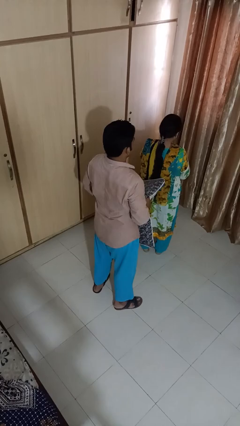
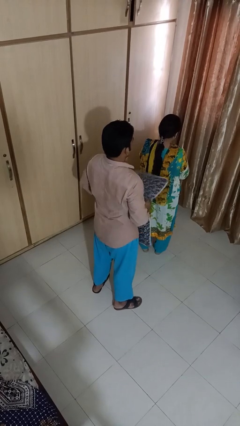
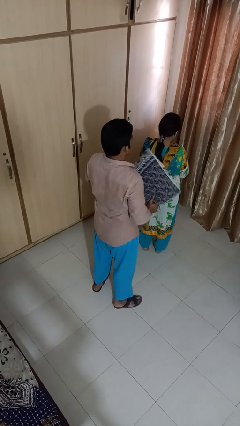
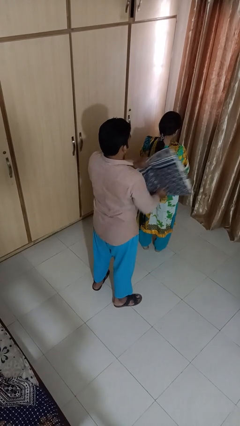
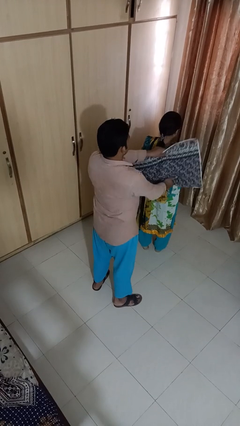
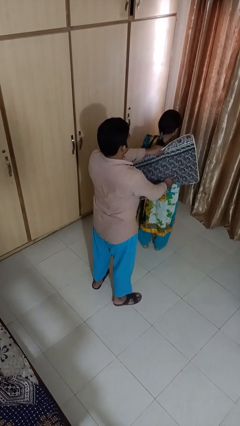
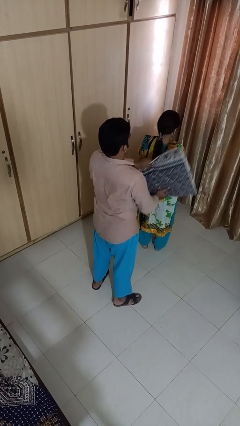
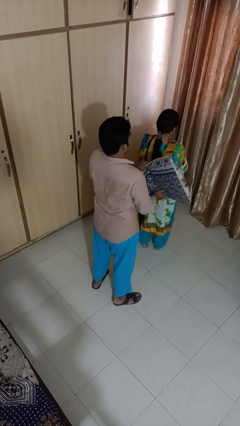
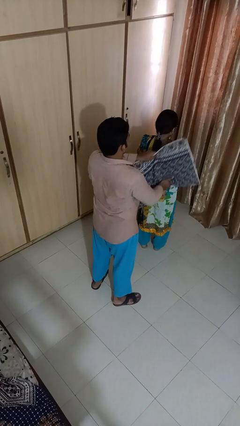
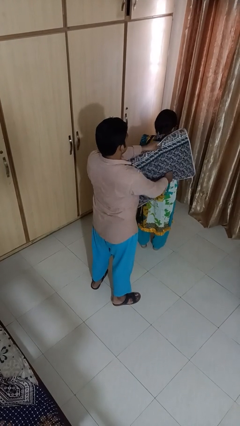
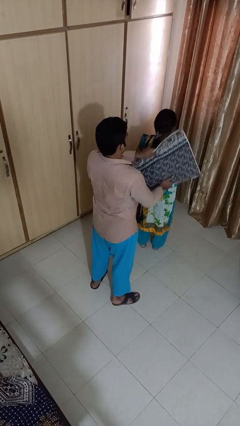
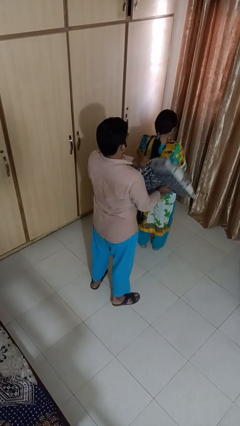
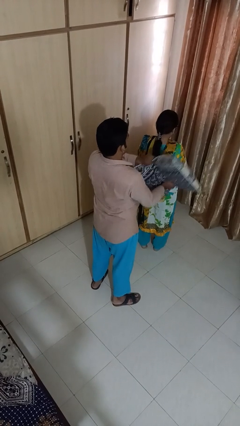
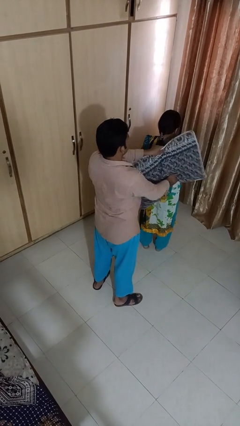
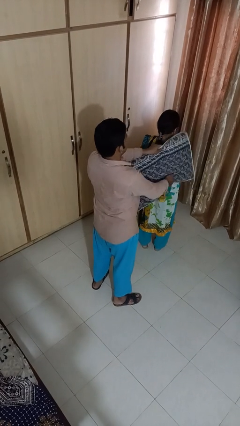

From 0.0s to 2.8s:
person hits person with pillow

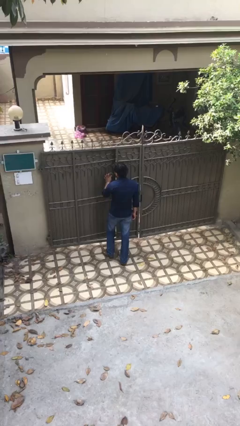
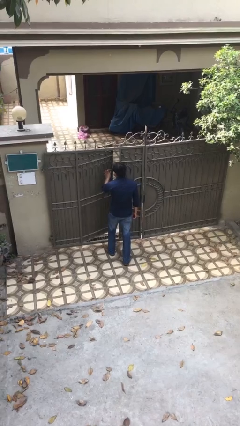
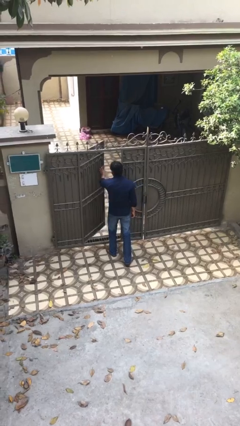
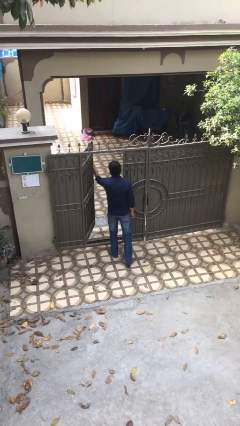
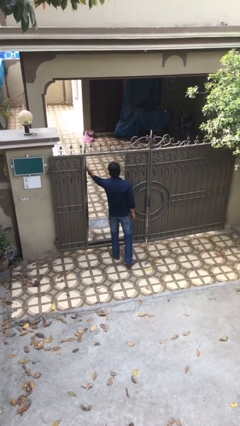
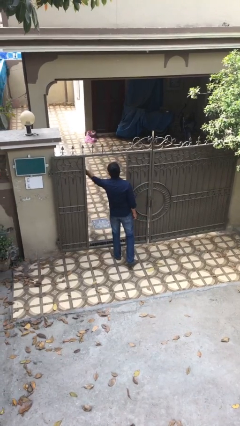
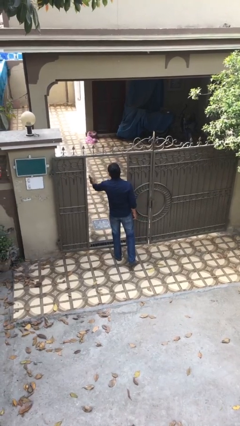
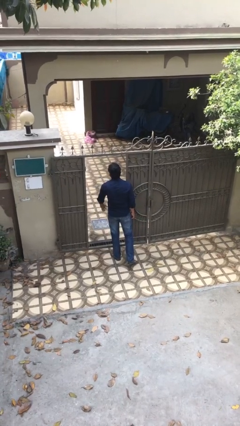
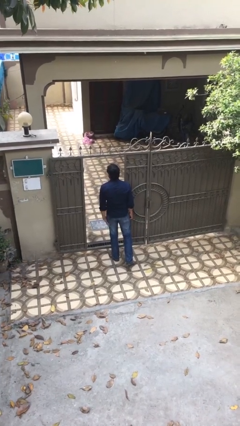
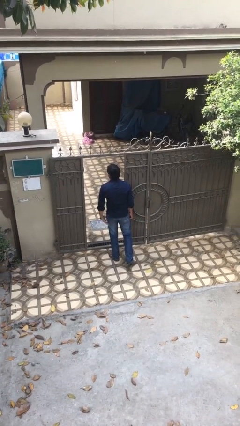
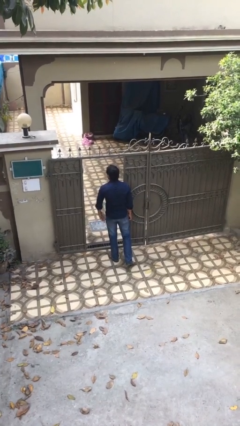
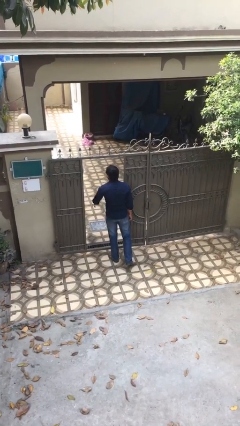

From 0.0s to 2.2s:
person opens facility door

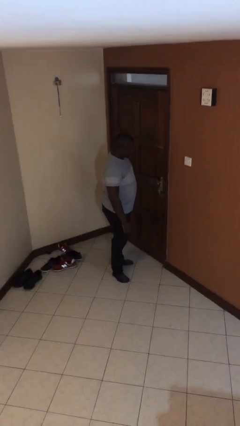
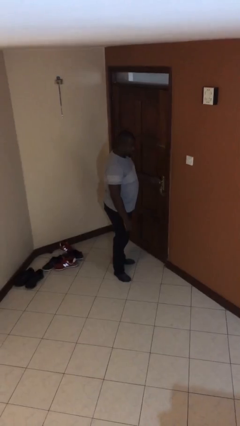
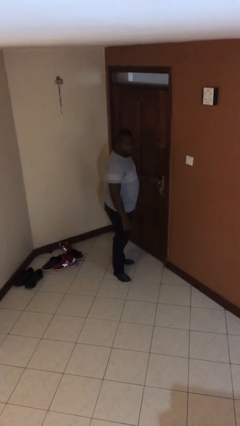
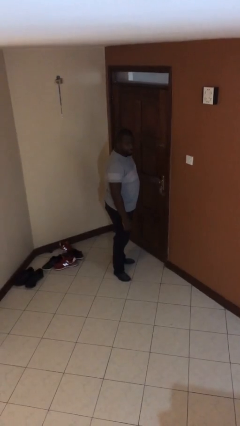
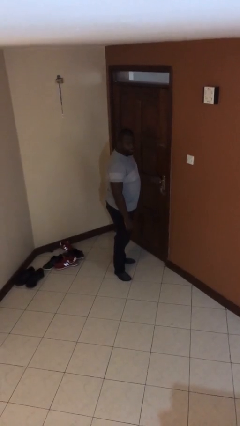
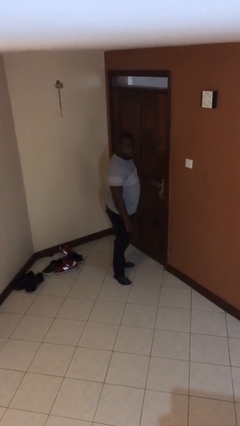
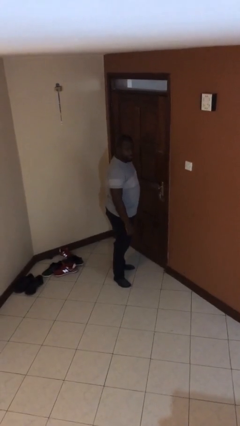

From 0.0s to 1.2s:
person closes facility door

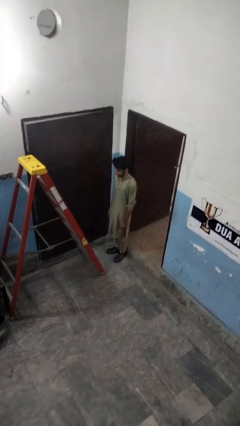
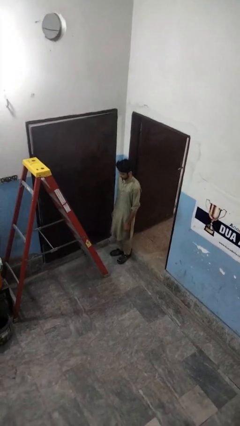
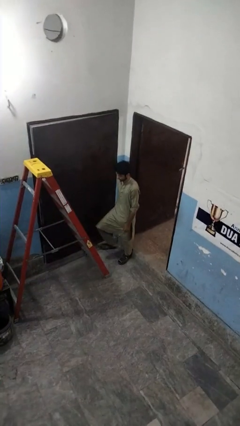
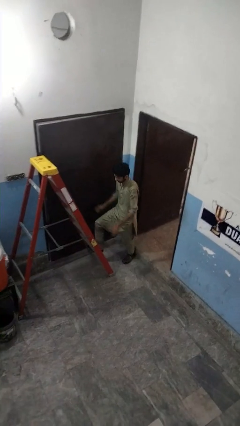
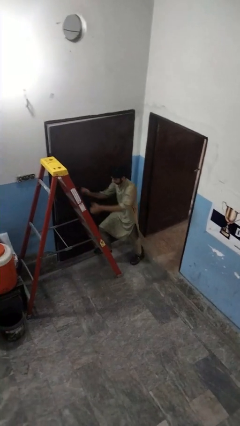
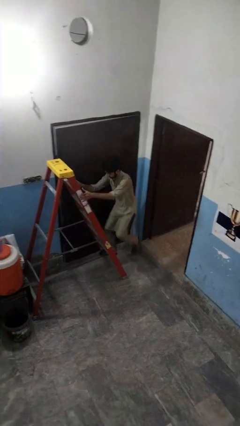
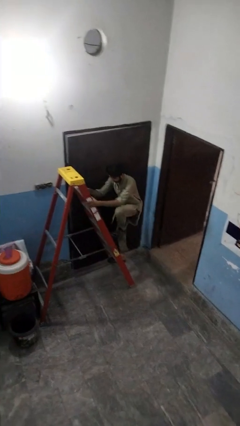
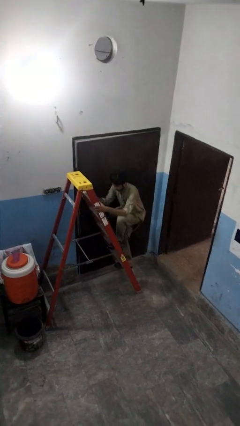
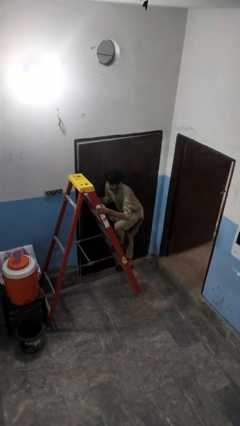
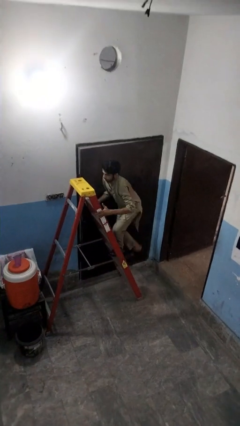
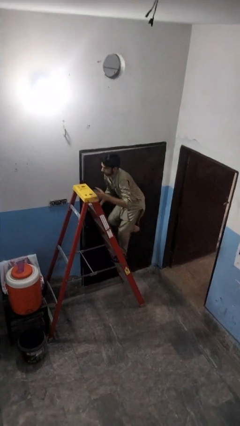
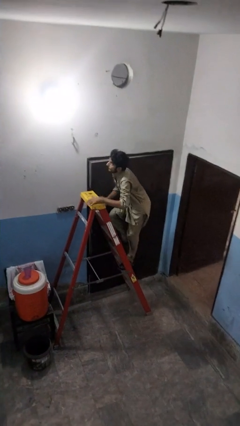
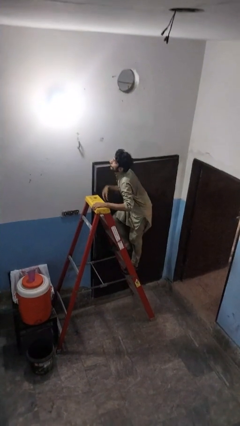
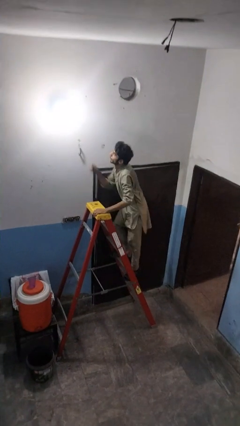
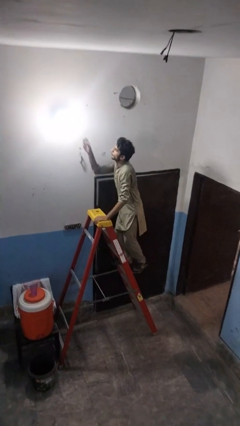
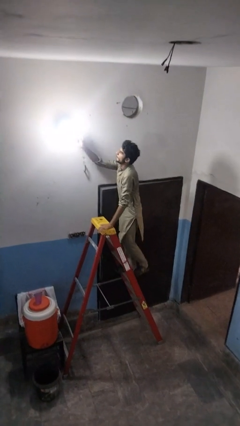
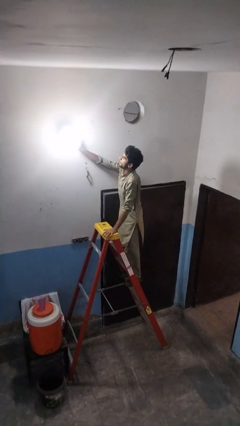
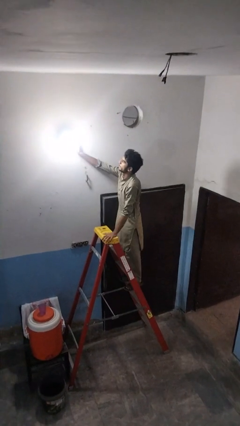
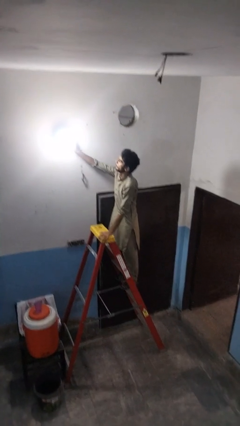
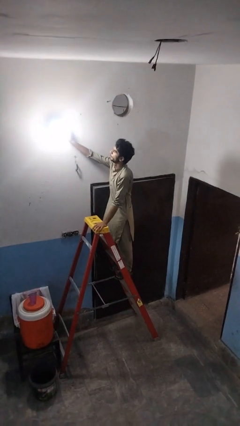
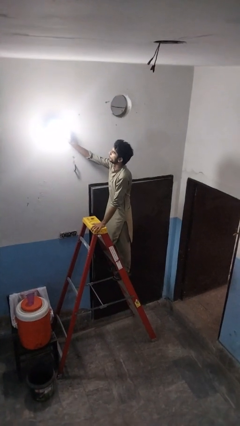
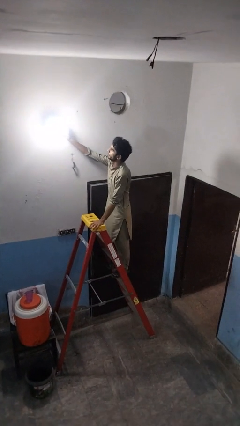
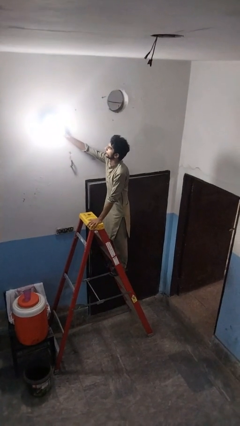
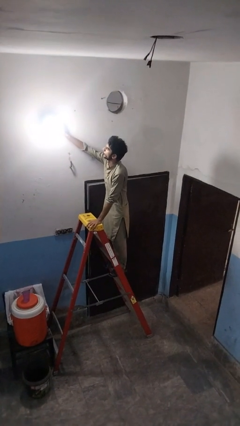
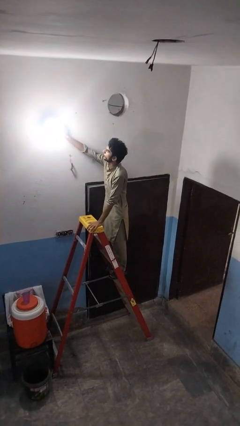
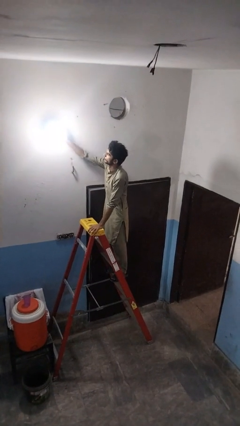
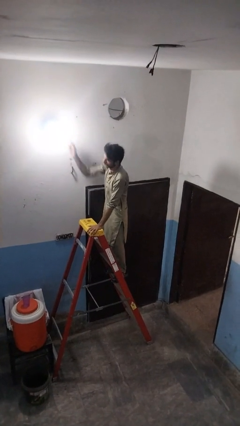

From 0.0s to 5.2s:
person climbs up ladder

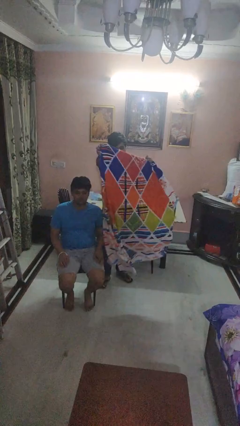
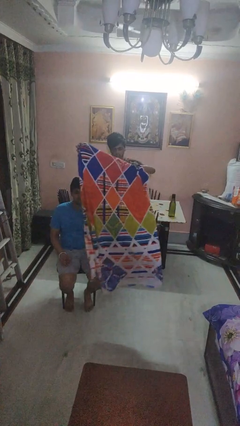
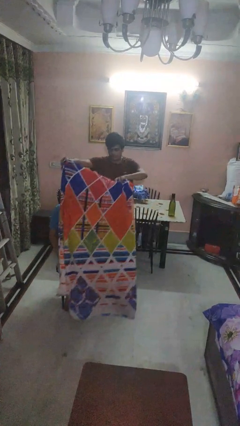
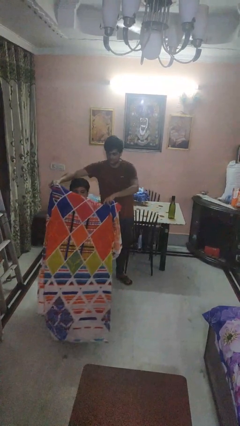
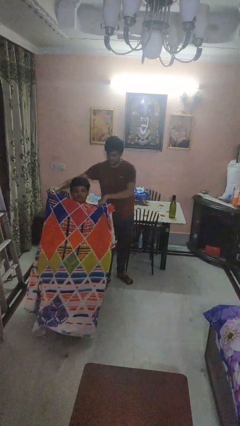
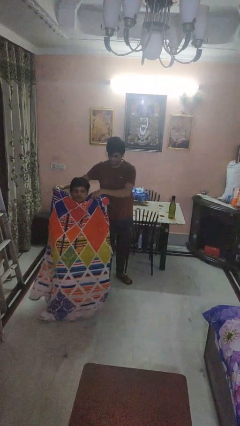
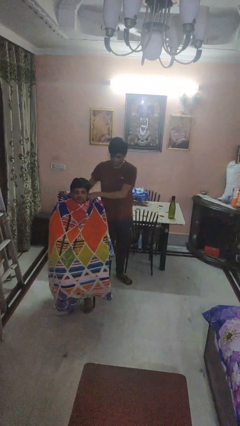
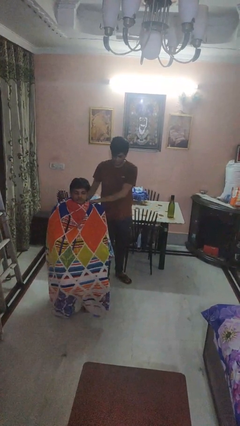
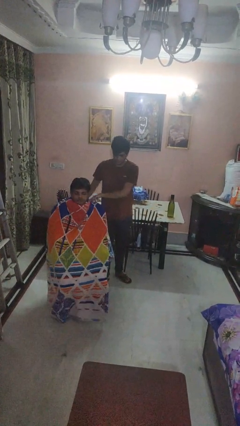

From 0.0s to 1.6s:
person covers friend with blanket

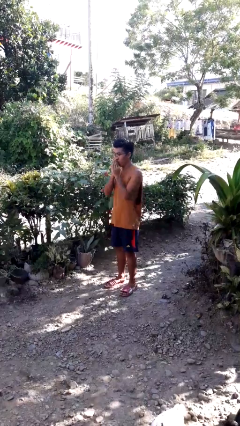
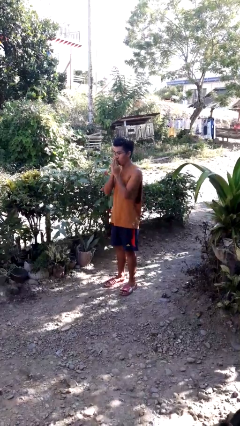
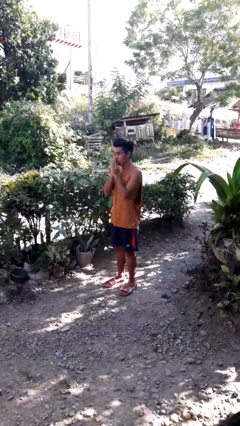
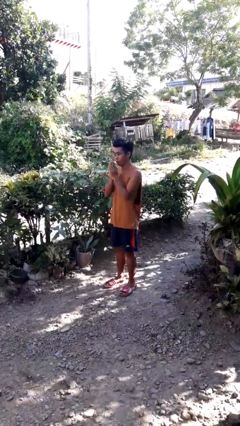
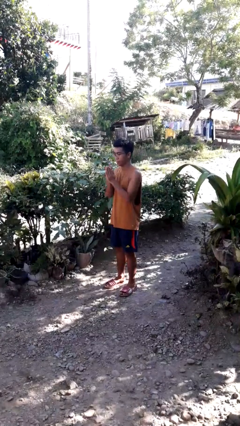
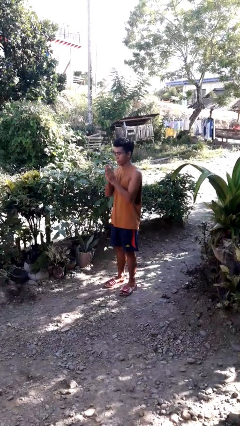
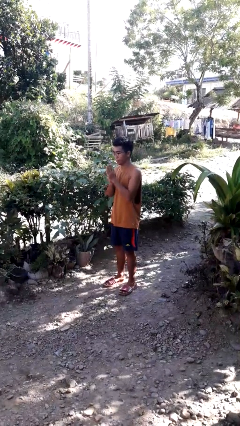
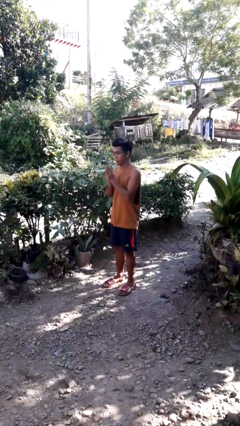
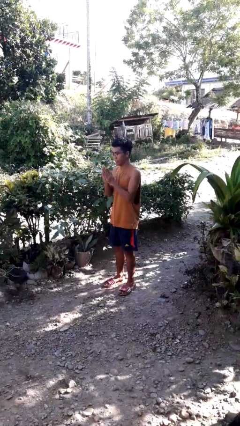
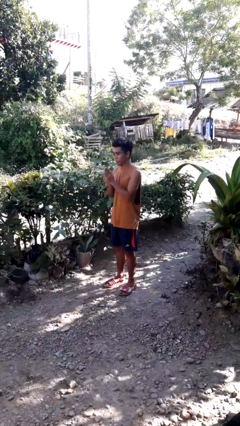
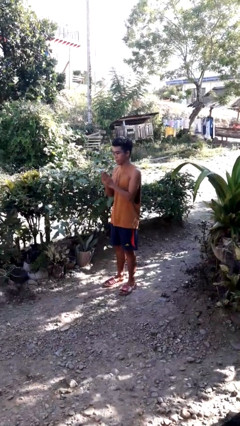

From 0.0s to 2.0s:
person blows into hands

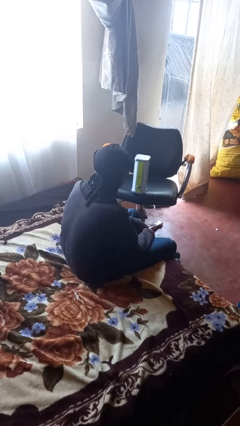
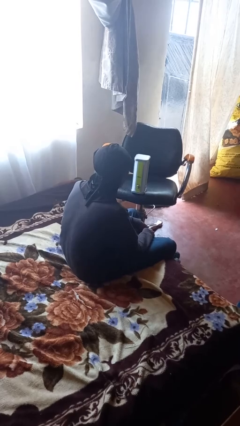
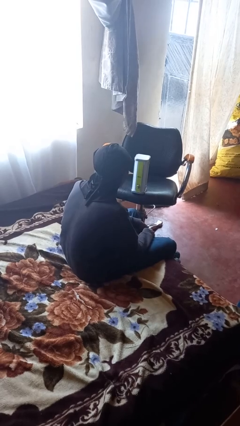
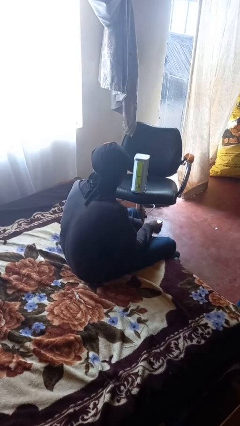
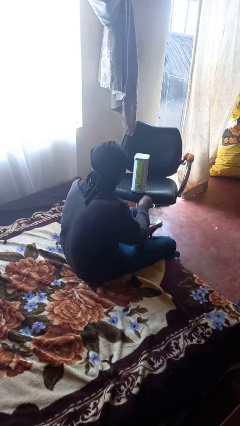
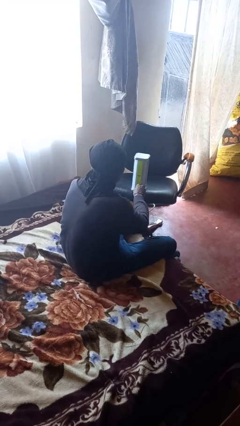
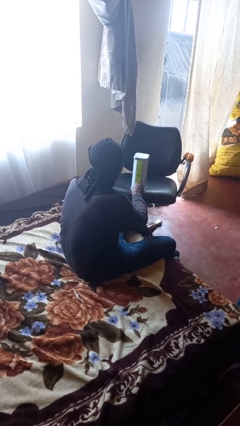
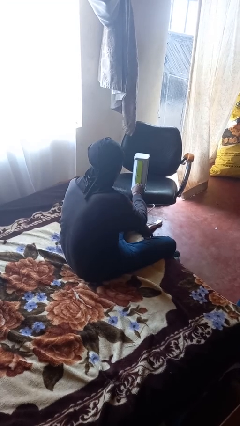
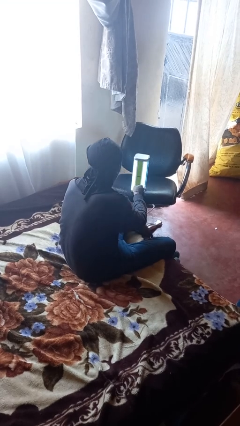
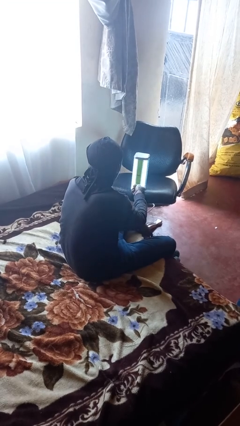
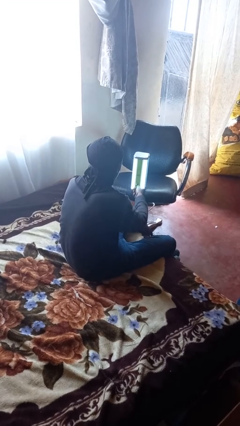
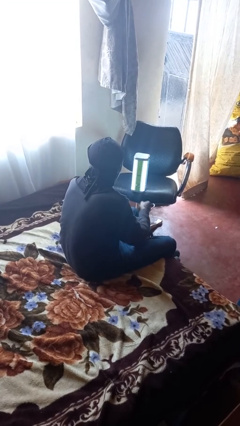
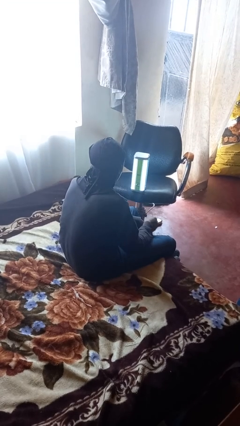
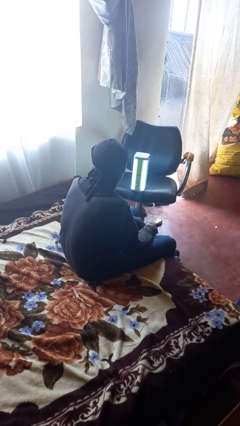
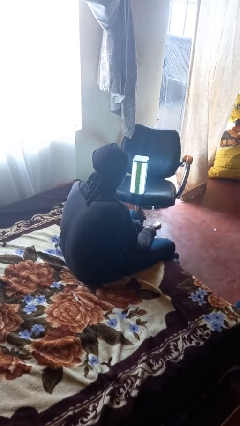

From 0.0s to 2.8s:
person turns on lamp
